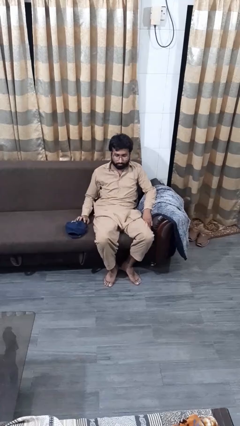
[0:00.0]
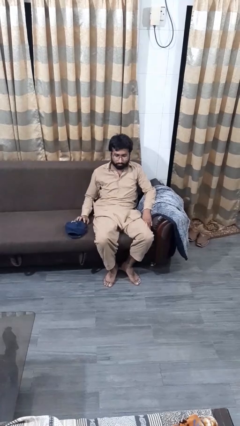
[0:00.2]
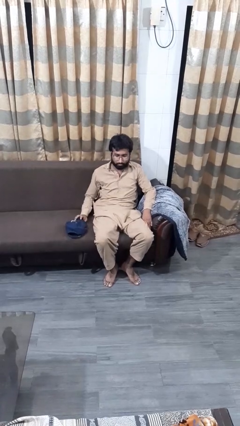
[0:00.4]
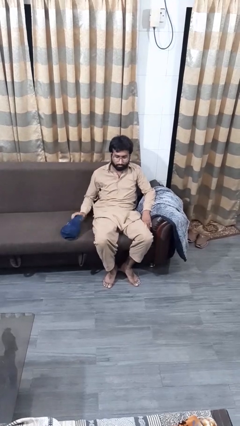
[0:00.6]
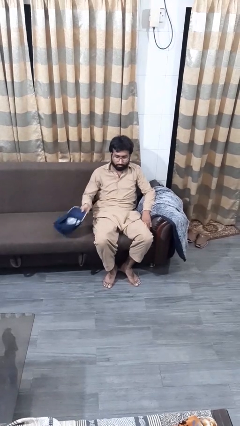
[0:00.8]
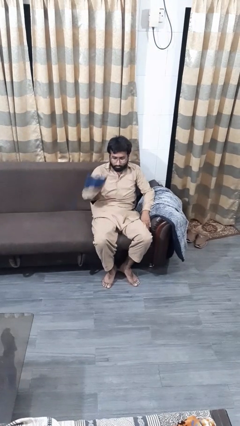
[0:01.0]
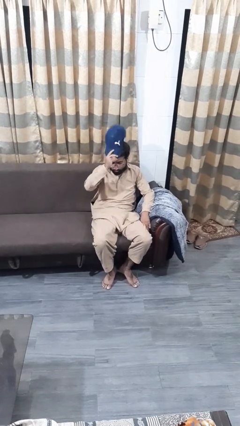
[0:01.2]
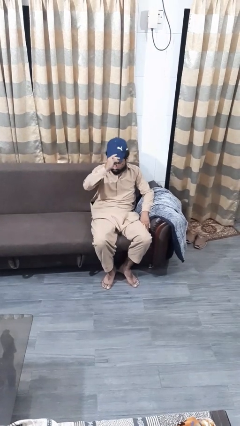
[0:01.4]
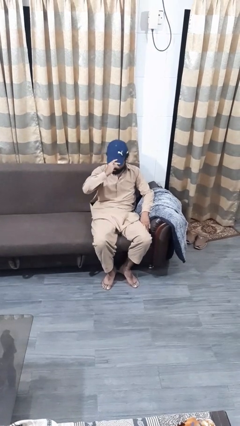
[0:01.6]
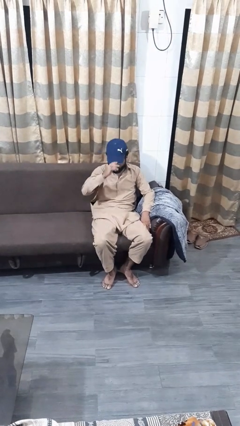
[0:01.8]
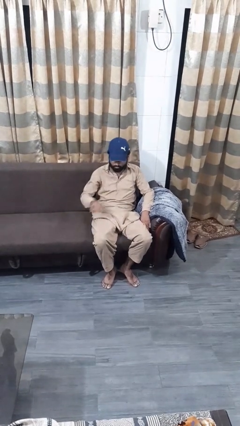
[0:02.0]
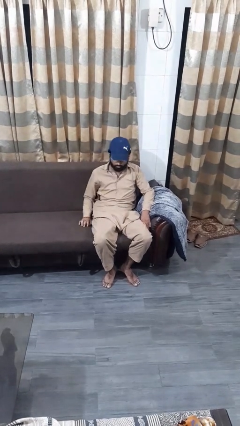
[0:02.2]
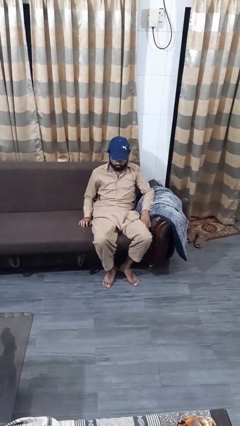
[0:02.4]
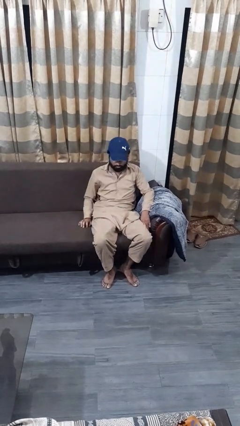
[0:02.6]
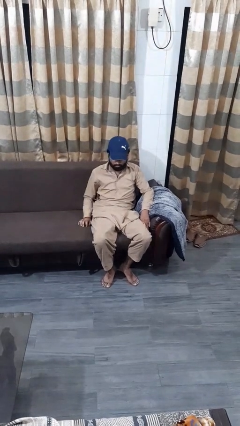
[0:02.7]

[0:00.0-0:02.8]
person puts on hat

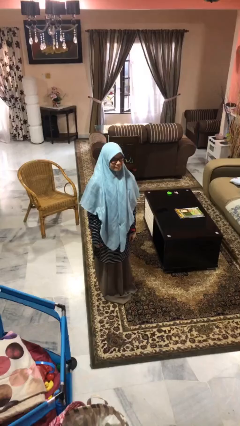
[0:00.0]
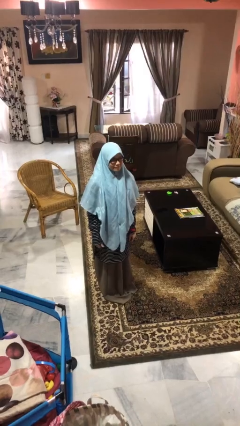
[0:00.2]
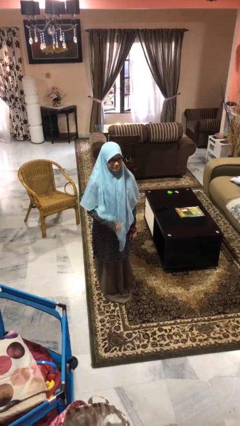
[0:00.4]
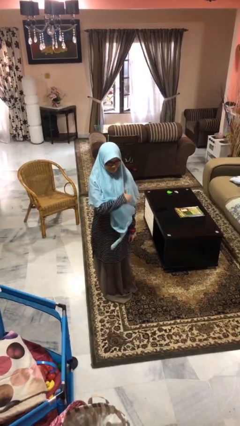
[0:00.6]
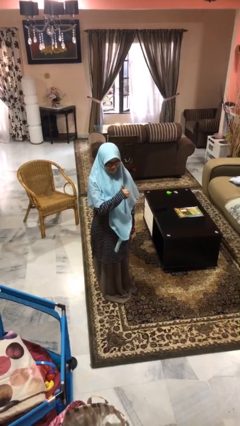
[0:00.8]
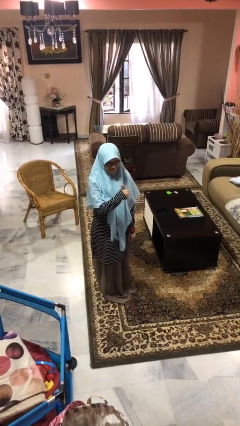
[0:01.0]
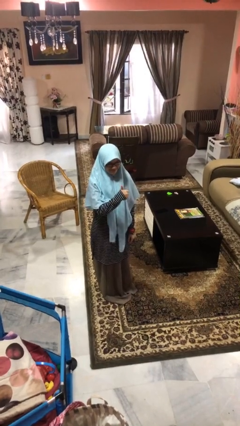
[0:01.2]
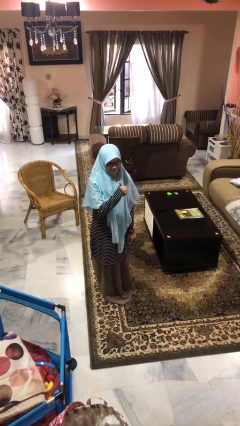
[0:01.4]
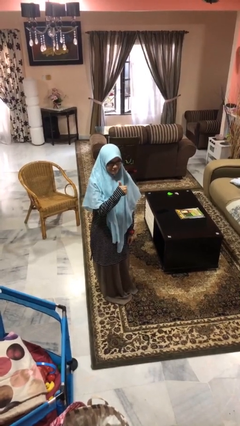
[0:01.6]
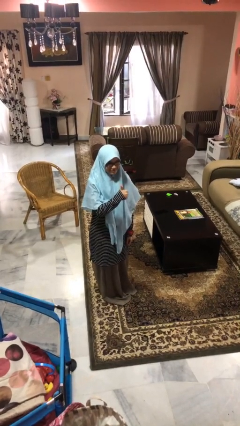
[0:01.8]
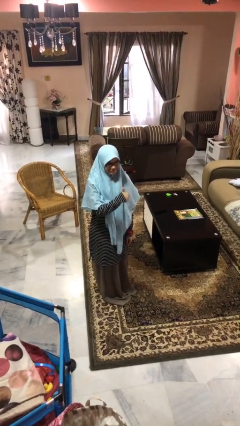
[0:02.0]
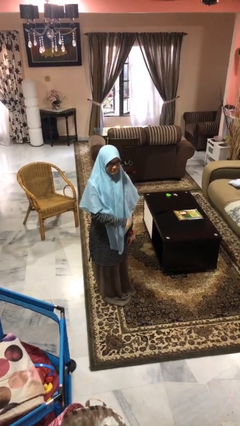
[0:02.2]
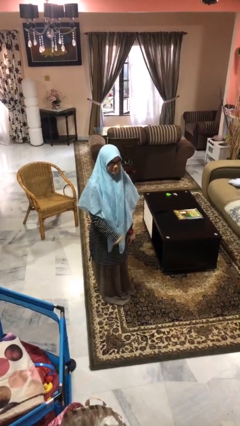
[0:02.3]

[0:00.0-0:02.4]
person gestures thumbs up

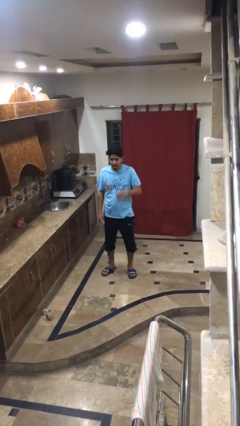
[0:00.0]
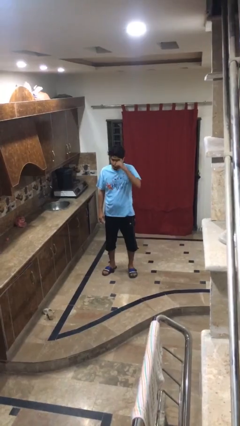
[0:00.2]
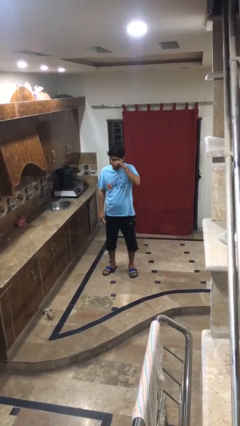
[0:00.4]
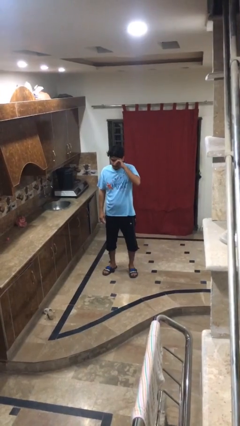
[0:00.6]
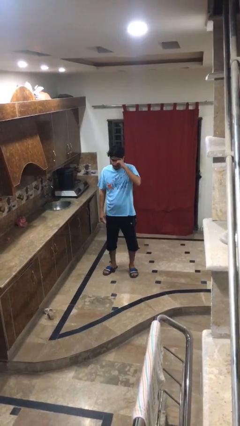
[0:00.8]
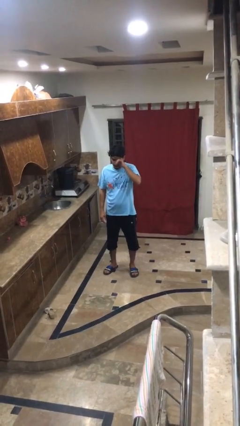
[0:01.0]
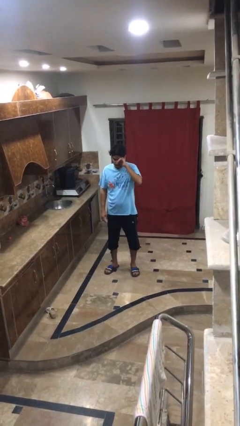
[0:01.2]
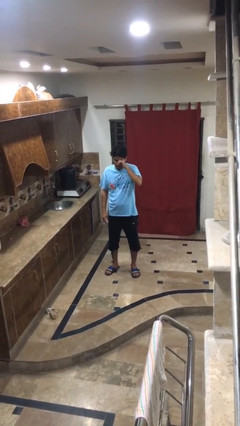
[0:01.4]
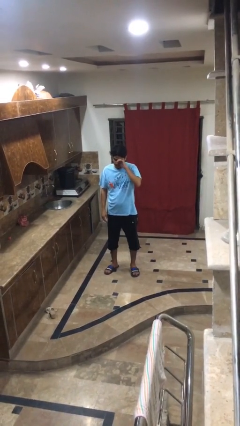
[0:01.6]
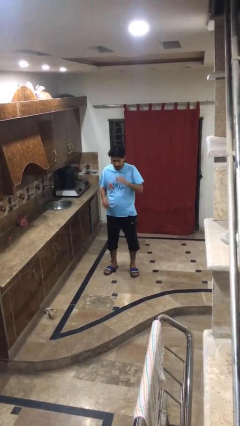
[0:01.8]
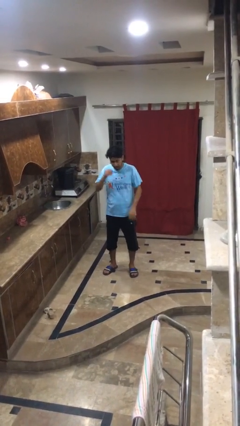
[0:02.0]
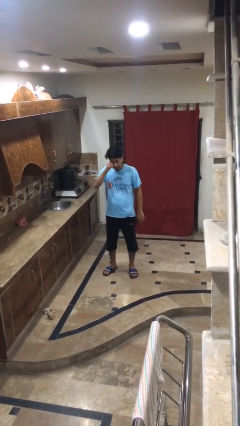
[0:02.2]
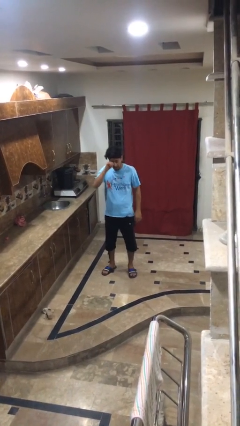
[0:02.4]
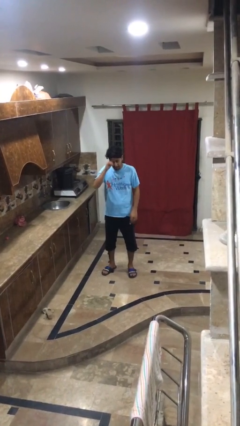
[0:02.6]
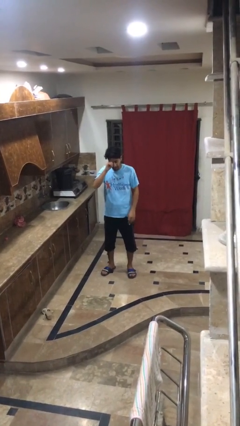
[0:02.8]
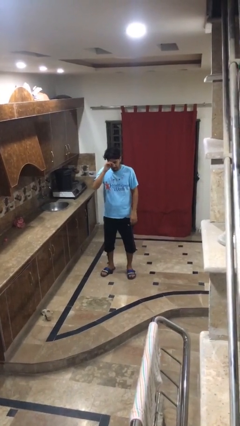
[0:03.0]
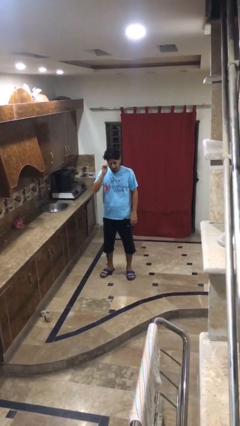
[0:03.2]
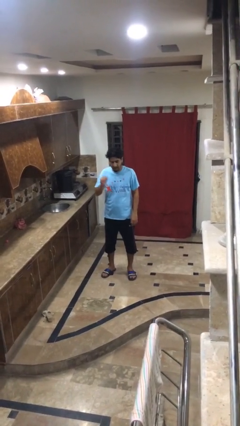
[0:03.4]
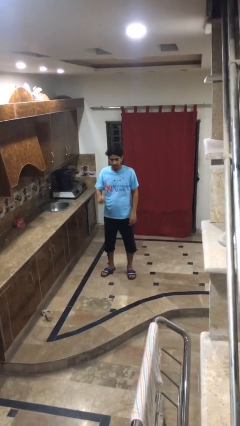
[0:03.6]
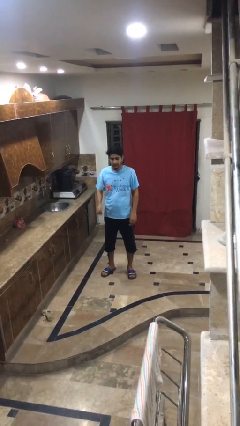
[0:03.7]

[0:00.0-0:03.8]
person rubs eyes

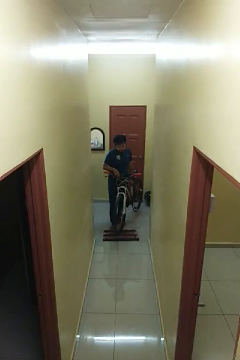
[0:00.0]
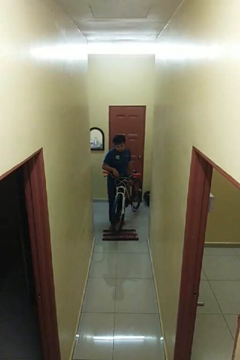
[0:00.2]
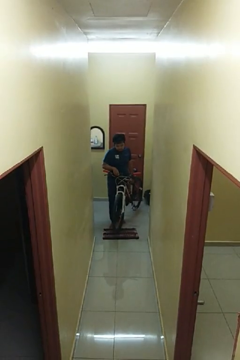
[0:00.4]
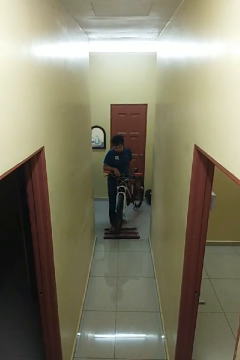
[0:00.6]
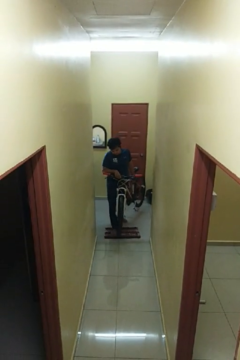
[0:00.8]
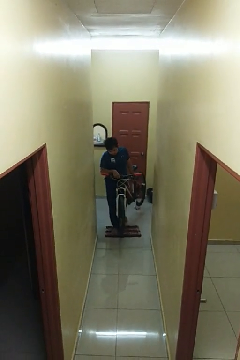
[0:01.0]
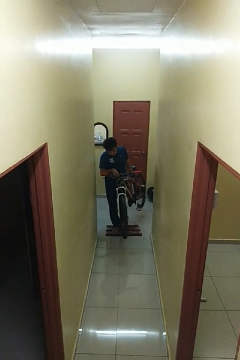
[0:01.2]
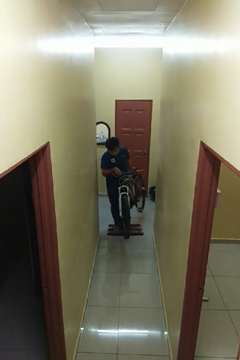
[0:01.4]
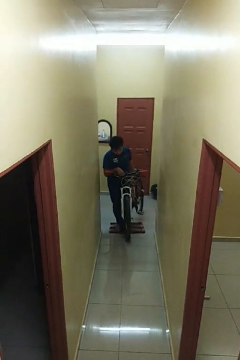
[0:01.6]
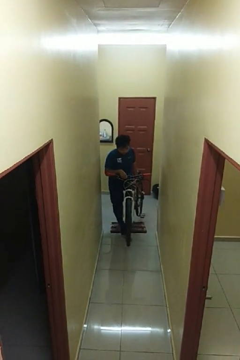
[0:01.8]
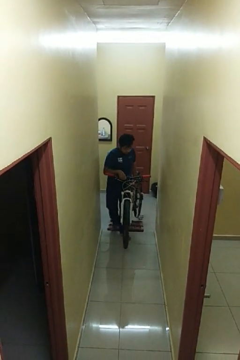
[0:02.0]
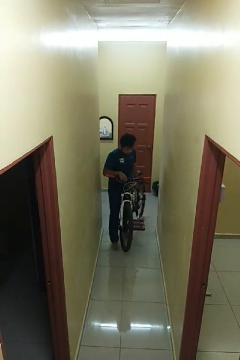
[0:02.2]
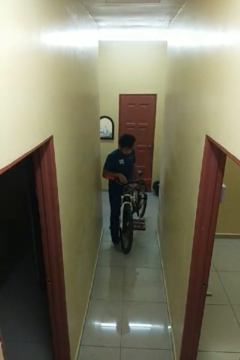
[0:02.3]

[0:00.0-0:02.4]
person carries bicycle

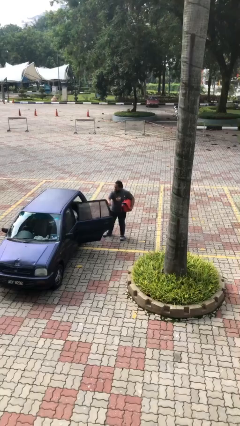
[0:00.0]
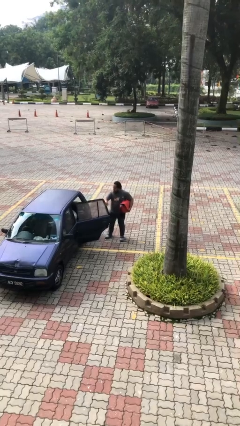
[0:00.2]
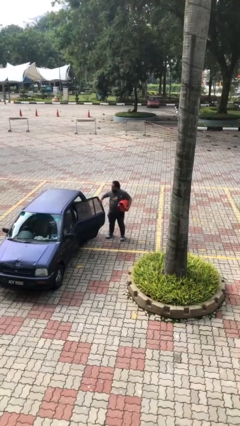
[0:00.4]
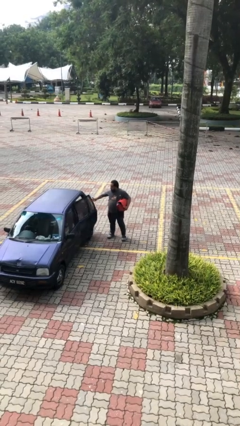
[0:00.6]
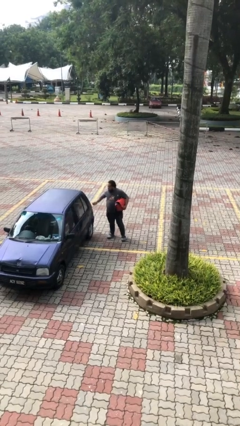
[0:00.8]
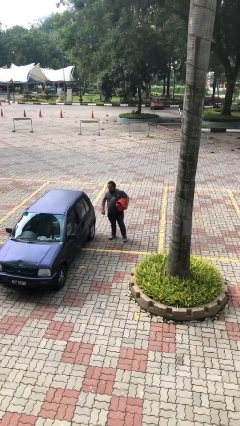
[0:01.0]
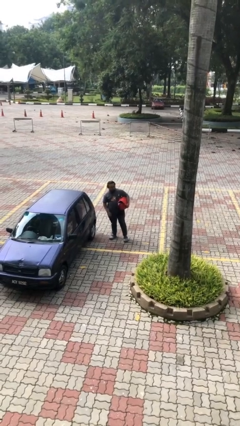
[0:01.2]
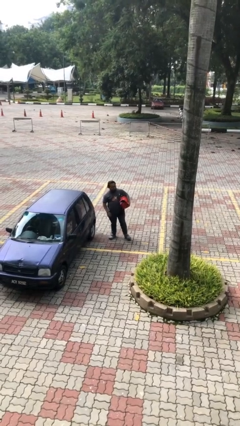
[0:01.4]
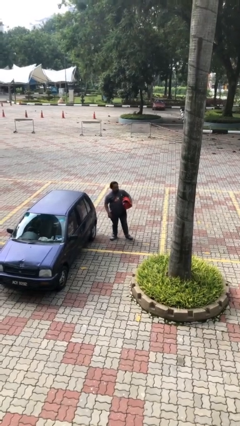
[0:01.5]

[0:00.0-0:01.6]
person closes car door

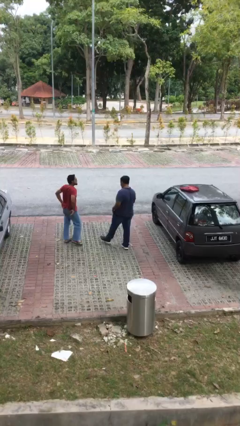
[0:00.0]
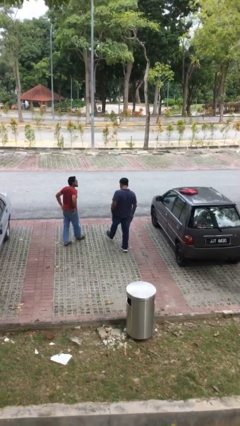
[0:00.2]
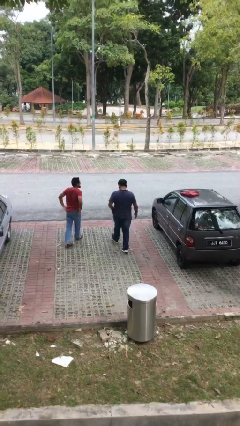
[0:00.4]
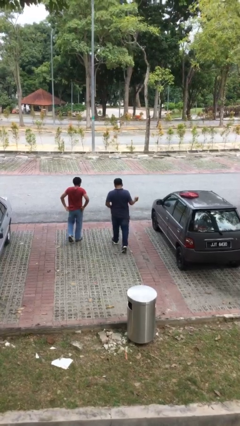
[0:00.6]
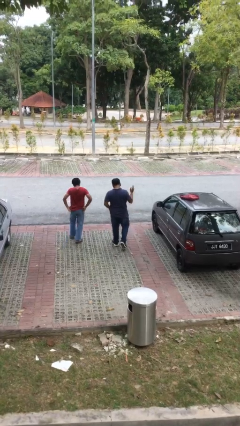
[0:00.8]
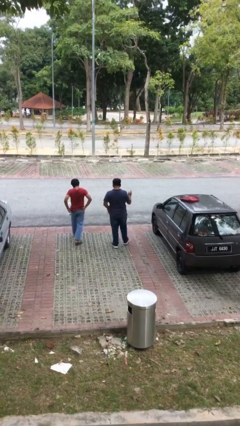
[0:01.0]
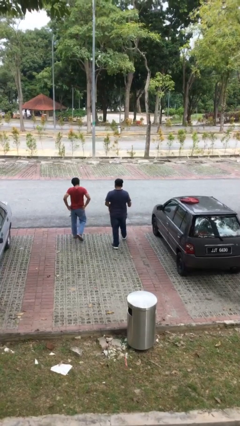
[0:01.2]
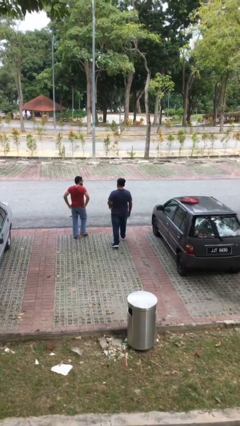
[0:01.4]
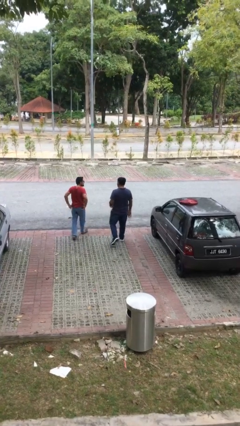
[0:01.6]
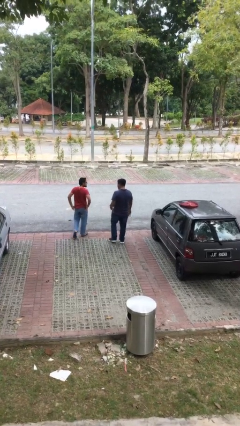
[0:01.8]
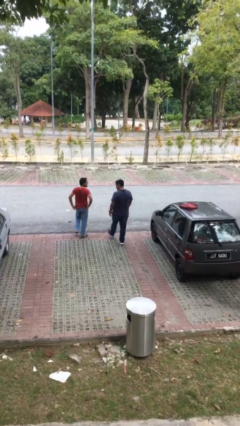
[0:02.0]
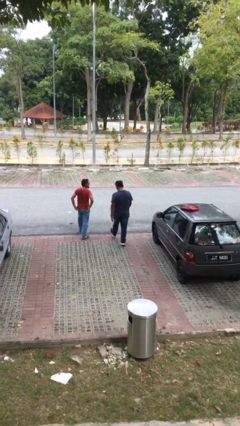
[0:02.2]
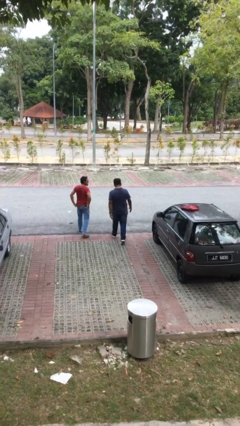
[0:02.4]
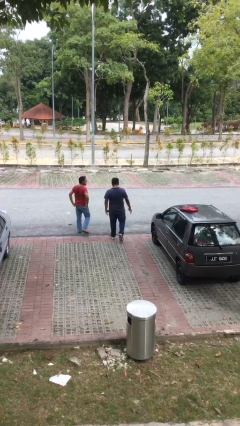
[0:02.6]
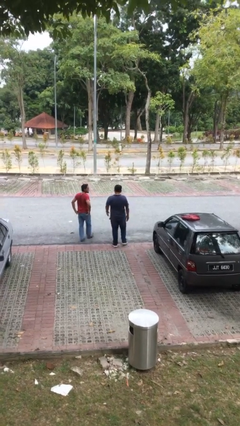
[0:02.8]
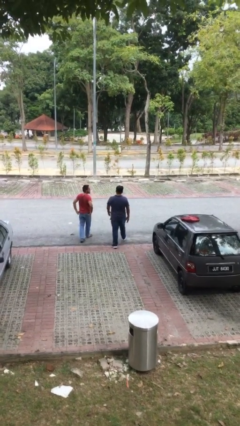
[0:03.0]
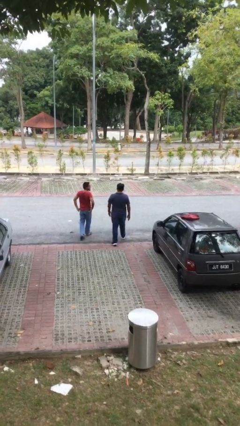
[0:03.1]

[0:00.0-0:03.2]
person talks to person

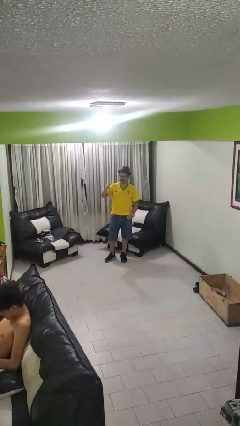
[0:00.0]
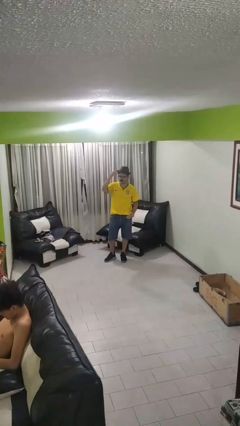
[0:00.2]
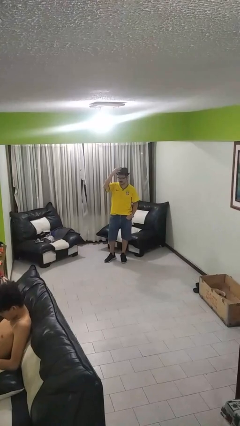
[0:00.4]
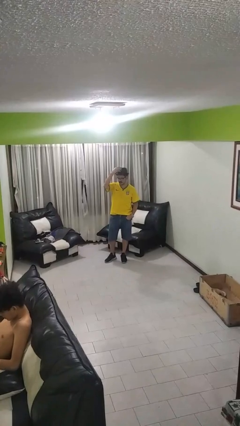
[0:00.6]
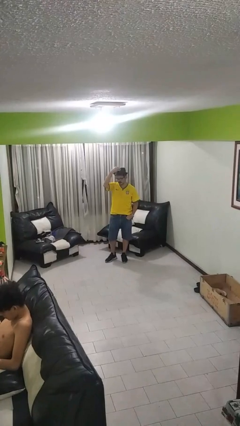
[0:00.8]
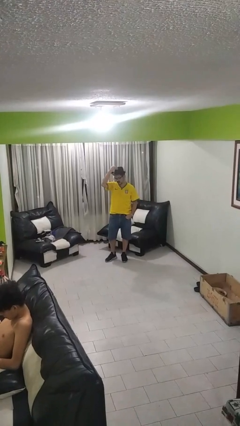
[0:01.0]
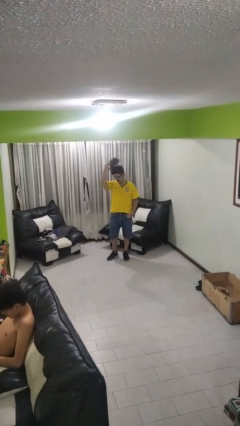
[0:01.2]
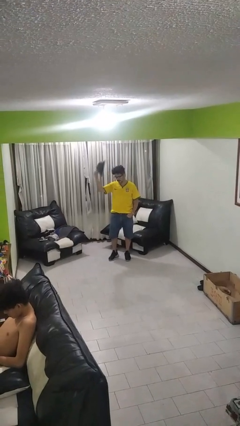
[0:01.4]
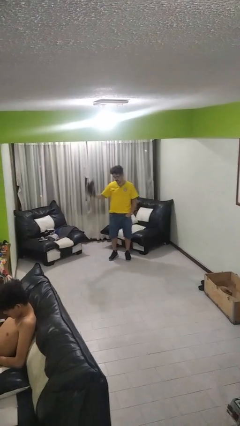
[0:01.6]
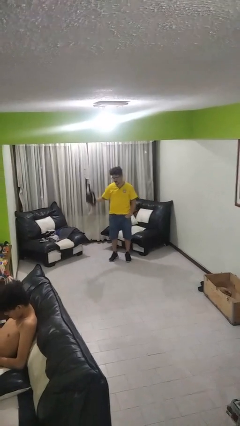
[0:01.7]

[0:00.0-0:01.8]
person takes off hat
